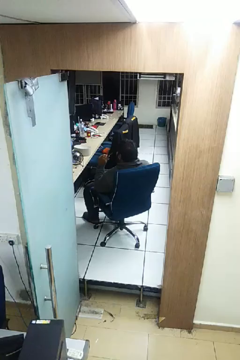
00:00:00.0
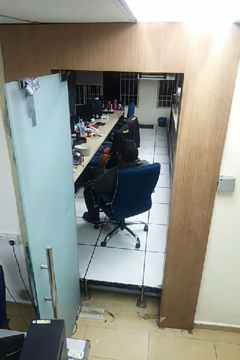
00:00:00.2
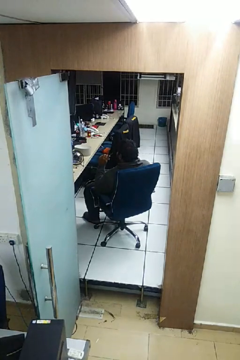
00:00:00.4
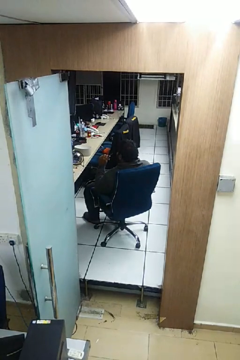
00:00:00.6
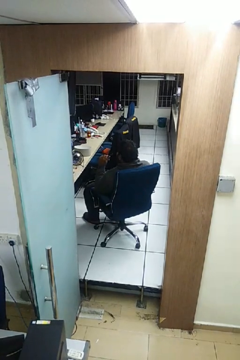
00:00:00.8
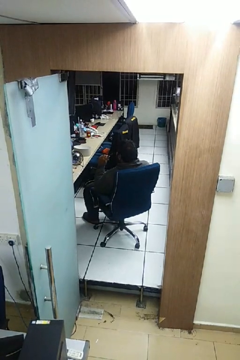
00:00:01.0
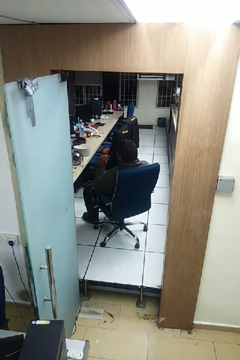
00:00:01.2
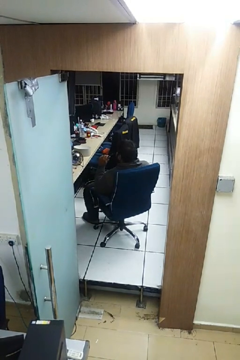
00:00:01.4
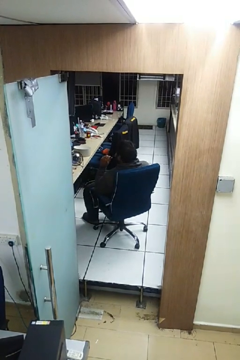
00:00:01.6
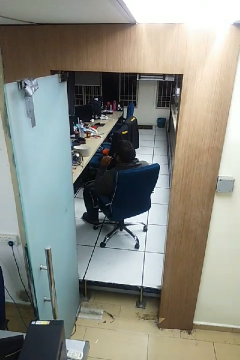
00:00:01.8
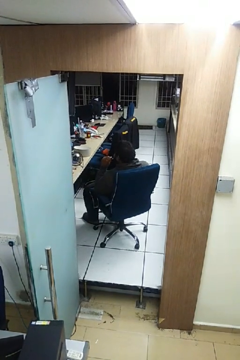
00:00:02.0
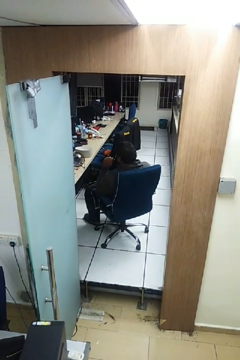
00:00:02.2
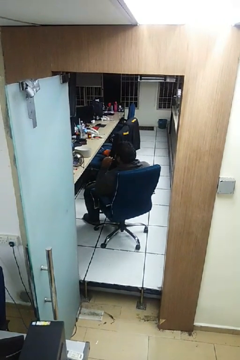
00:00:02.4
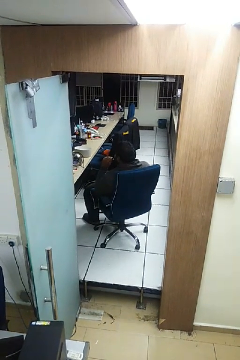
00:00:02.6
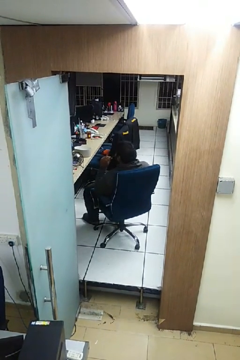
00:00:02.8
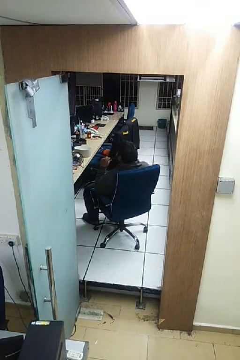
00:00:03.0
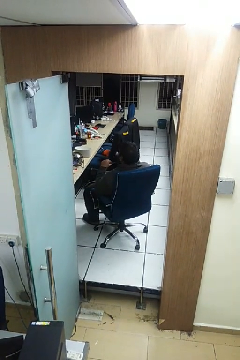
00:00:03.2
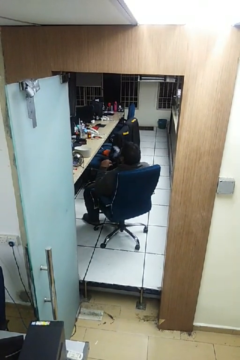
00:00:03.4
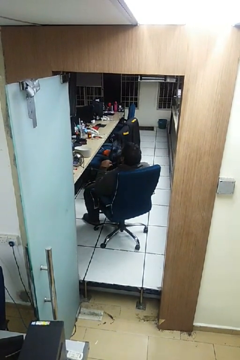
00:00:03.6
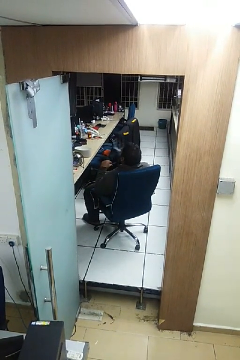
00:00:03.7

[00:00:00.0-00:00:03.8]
person vapes

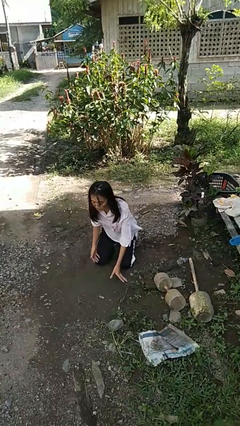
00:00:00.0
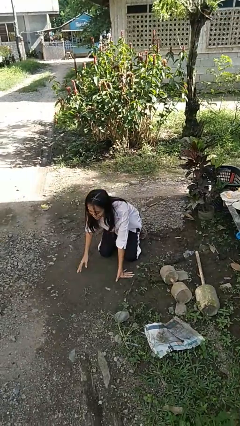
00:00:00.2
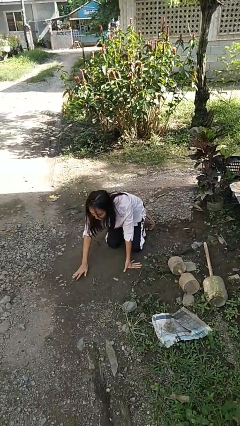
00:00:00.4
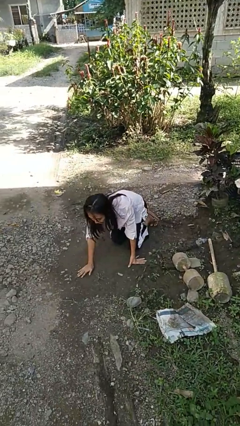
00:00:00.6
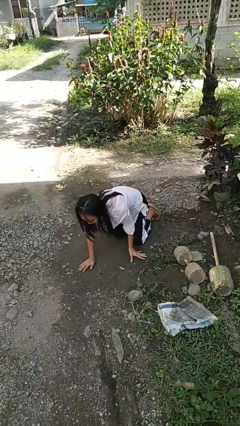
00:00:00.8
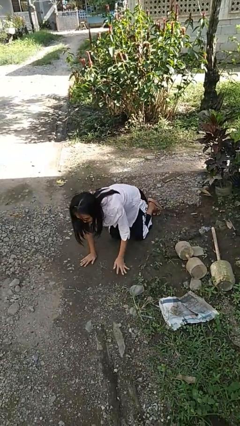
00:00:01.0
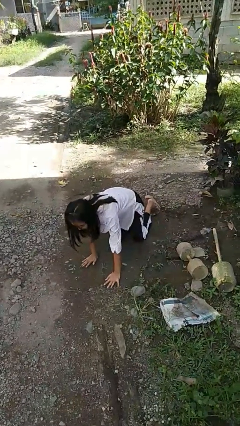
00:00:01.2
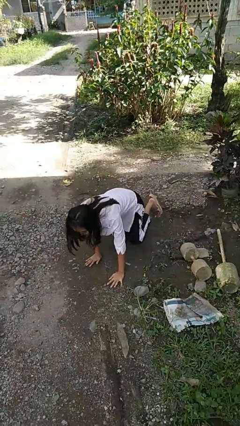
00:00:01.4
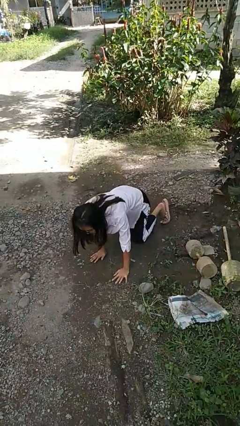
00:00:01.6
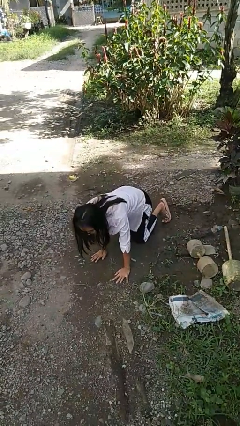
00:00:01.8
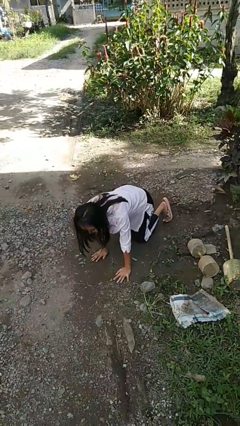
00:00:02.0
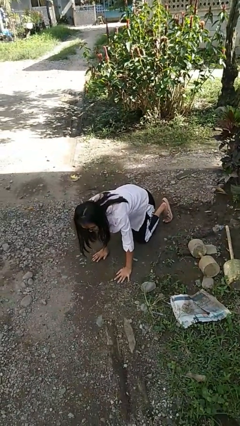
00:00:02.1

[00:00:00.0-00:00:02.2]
person crawls

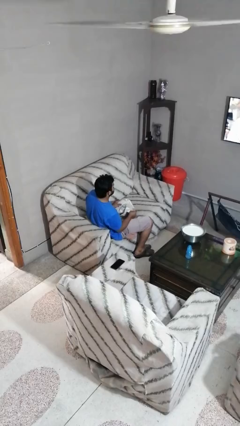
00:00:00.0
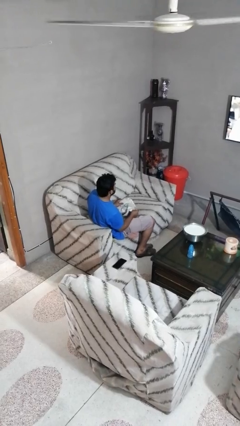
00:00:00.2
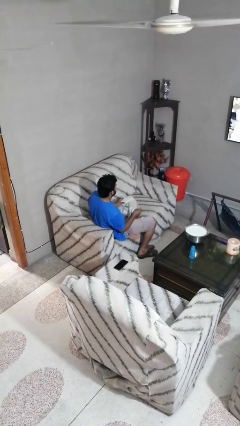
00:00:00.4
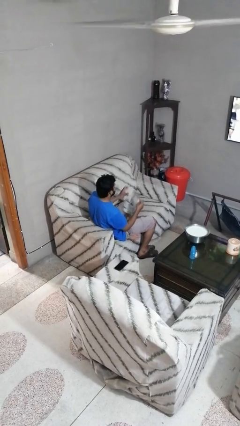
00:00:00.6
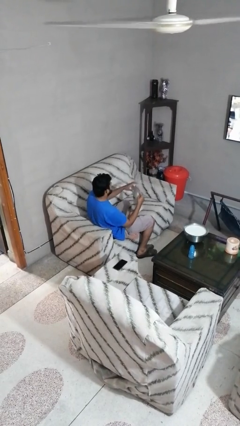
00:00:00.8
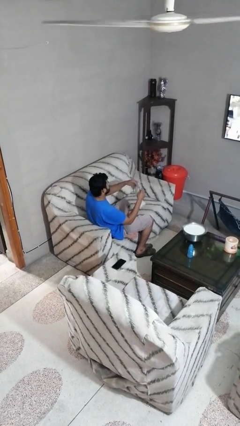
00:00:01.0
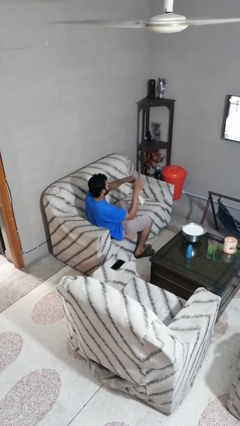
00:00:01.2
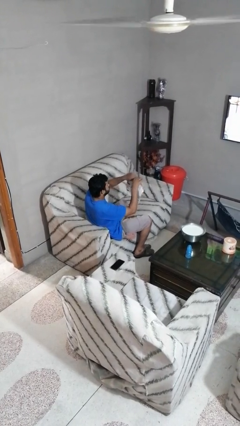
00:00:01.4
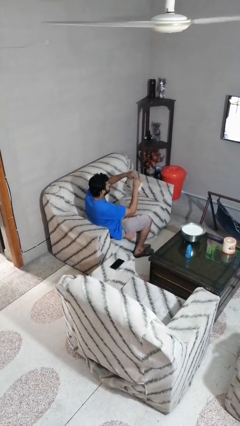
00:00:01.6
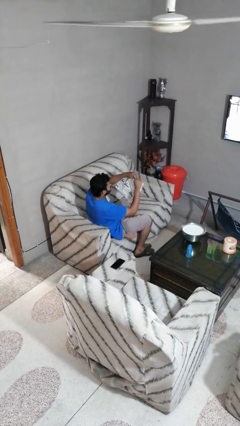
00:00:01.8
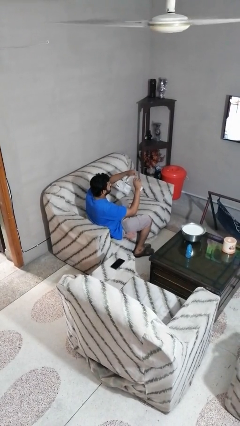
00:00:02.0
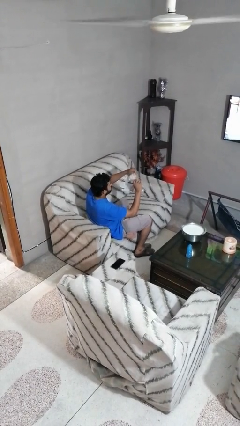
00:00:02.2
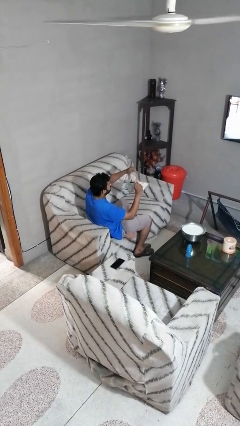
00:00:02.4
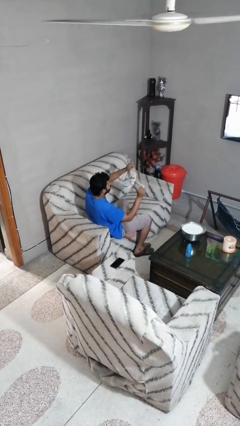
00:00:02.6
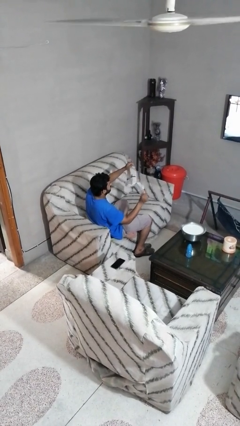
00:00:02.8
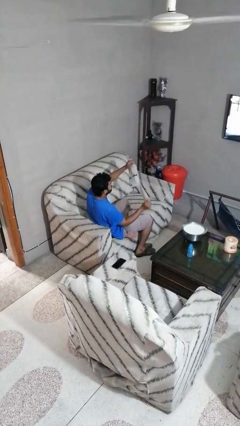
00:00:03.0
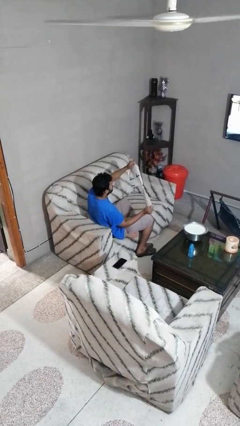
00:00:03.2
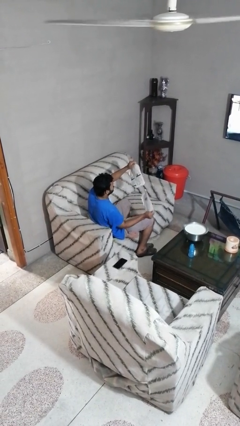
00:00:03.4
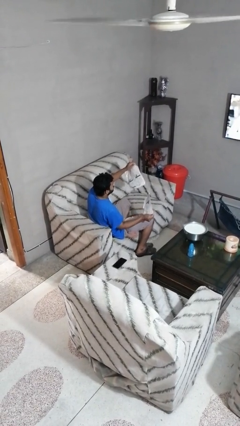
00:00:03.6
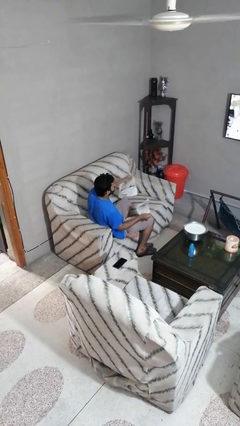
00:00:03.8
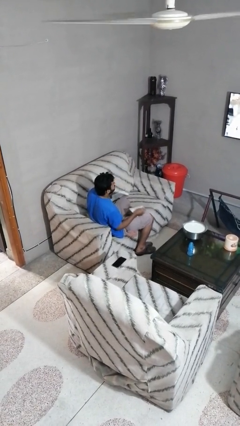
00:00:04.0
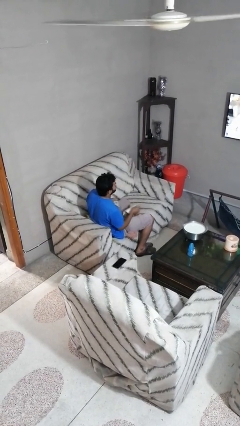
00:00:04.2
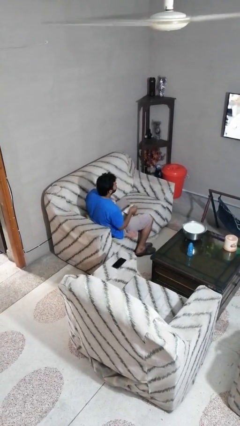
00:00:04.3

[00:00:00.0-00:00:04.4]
person tears paper

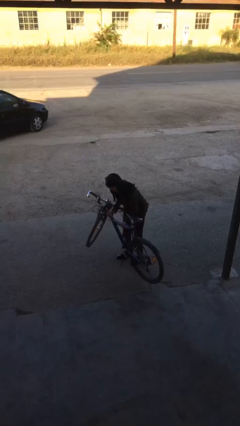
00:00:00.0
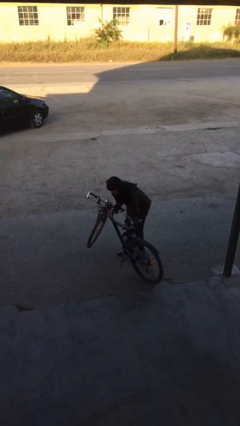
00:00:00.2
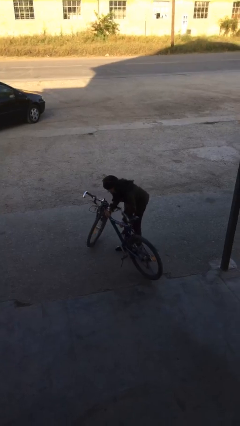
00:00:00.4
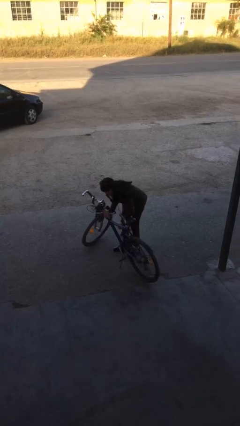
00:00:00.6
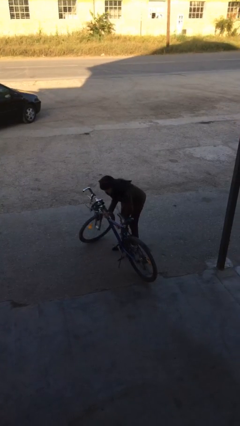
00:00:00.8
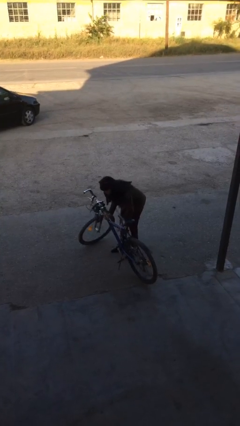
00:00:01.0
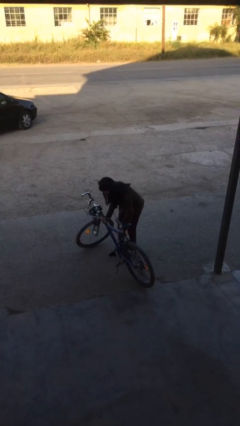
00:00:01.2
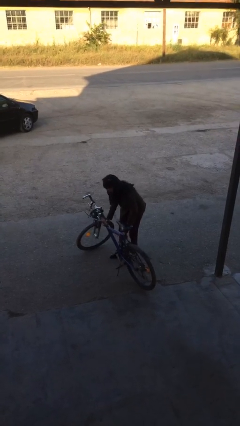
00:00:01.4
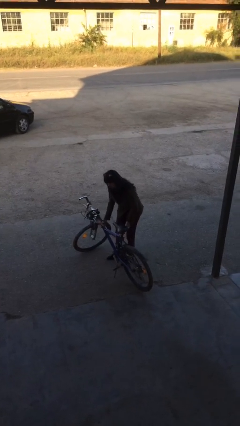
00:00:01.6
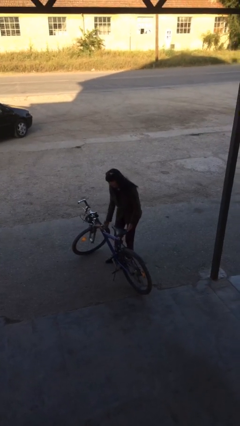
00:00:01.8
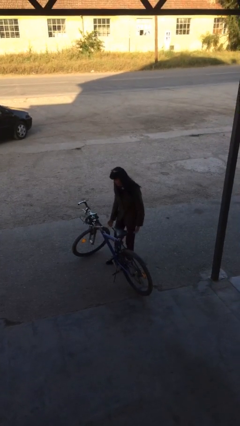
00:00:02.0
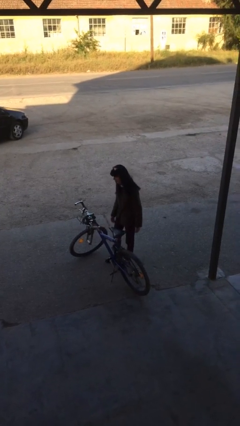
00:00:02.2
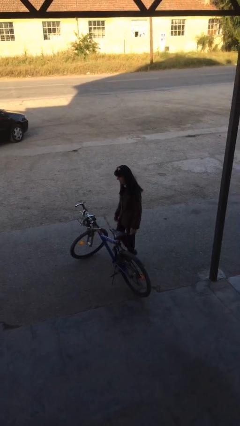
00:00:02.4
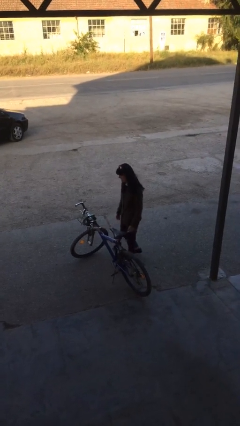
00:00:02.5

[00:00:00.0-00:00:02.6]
person puts down object on floor

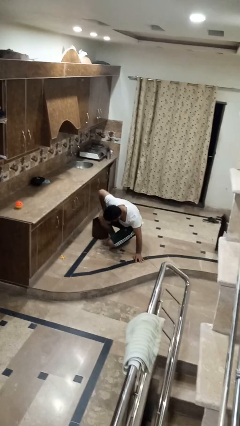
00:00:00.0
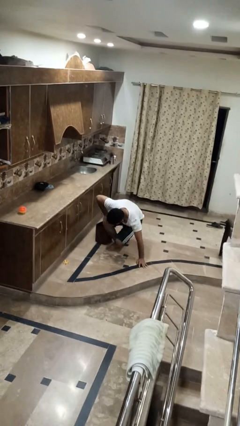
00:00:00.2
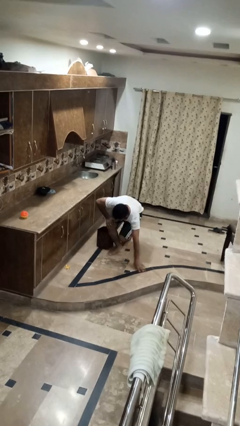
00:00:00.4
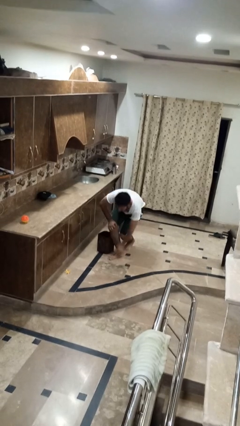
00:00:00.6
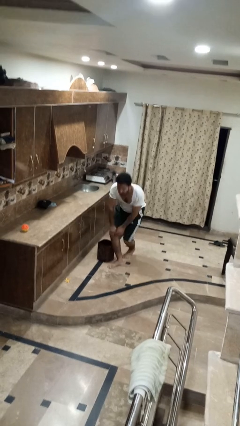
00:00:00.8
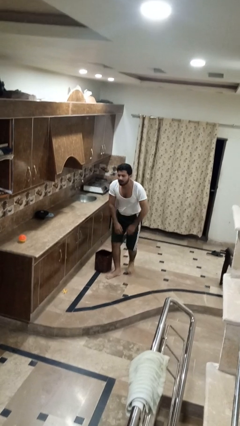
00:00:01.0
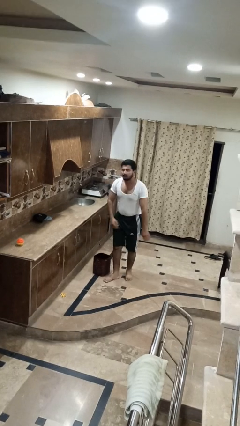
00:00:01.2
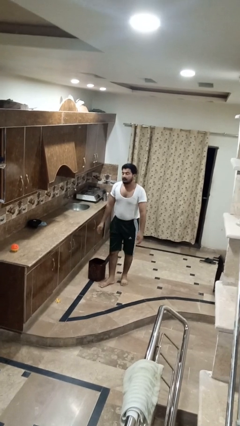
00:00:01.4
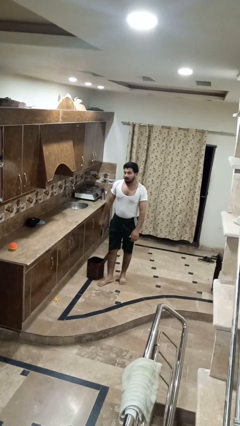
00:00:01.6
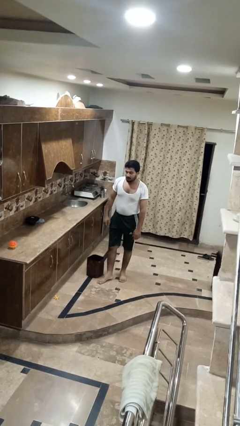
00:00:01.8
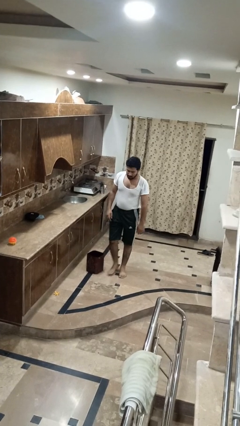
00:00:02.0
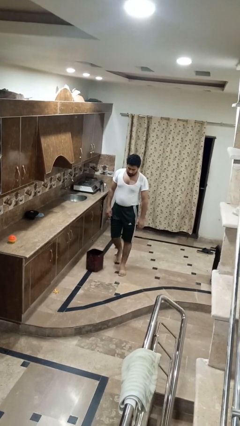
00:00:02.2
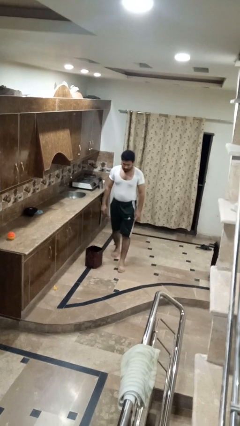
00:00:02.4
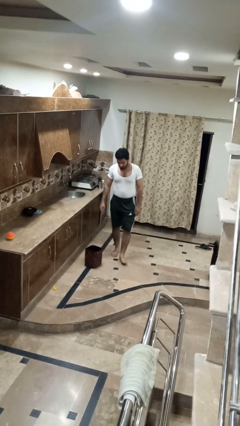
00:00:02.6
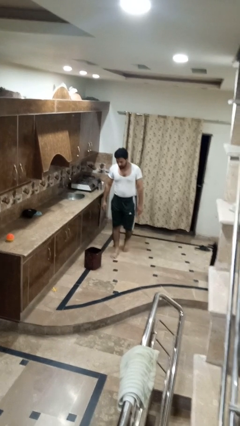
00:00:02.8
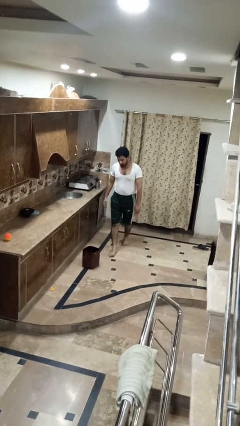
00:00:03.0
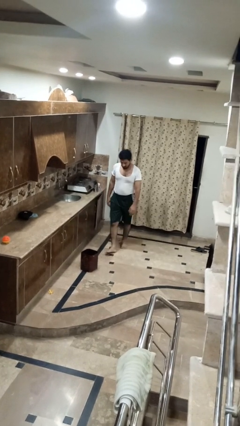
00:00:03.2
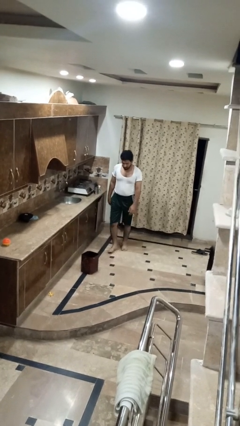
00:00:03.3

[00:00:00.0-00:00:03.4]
person stands up from floor

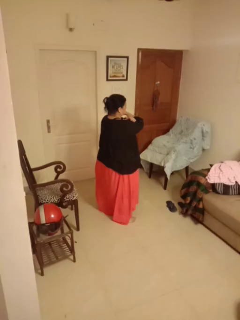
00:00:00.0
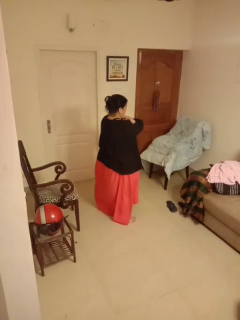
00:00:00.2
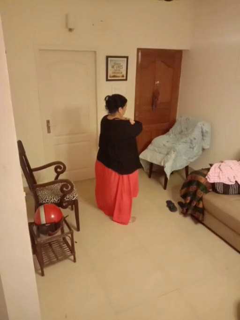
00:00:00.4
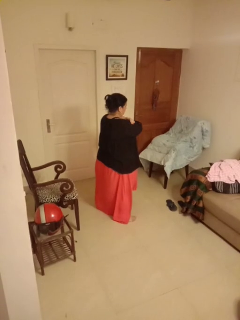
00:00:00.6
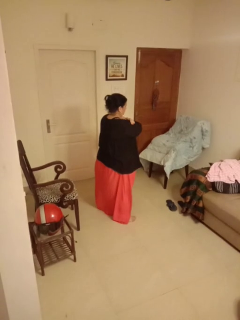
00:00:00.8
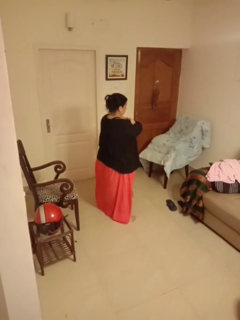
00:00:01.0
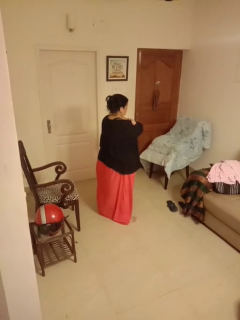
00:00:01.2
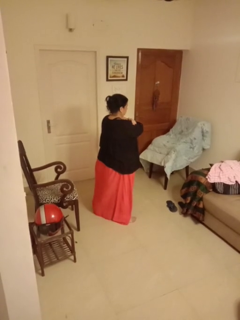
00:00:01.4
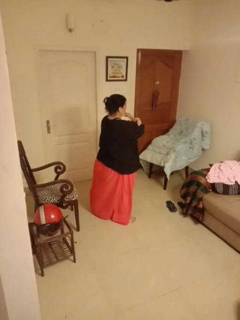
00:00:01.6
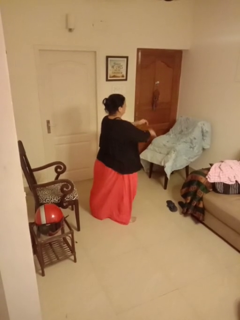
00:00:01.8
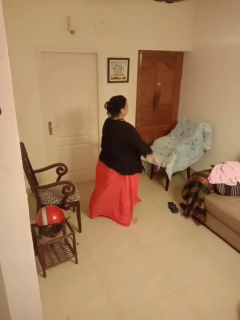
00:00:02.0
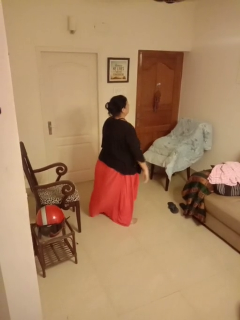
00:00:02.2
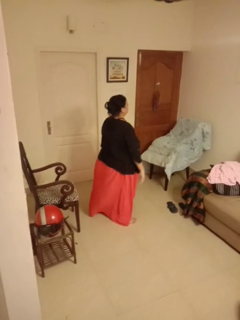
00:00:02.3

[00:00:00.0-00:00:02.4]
person gestures arms x
